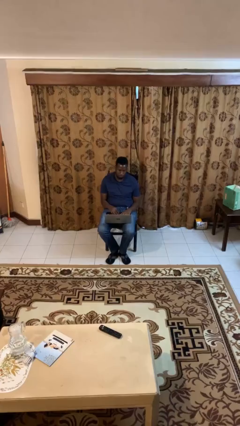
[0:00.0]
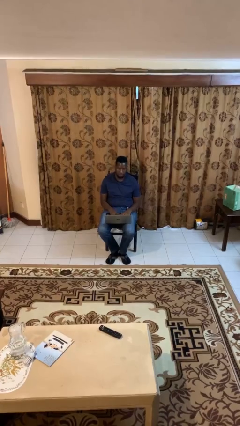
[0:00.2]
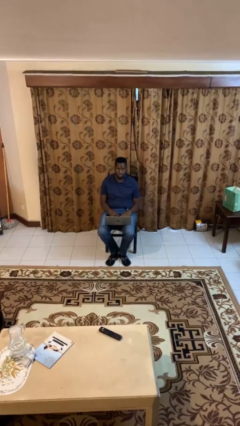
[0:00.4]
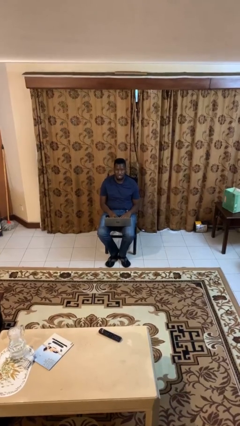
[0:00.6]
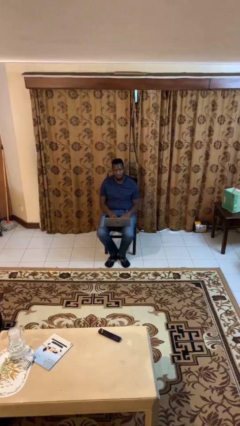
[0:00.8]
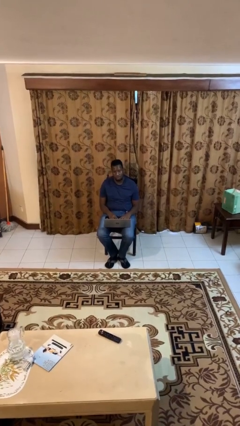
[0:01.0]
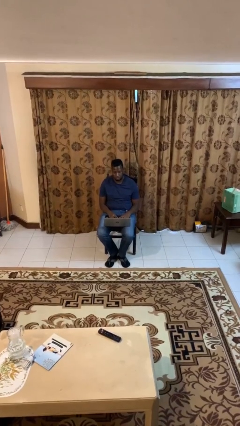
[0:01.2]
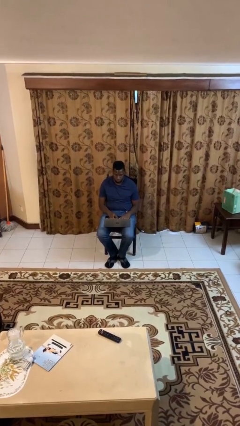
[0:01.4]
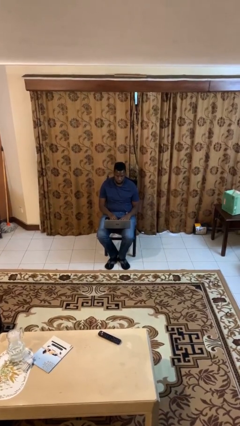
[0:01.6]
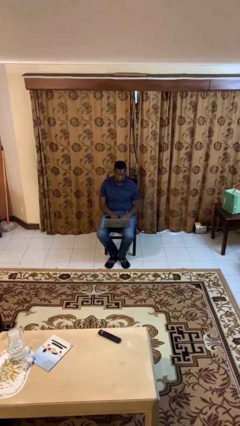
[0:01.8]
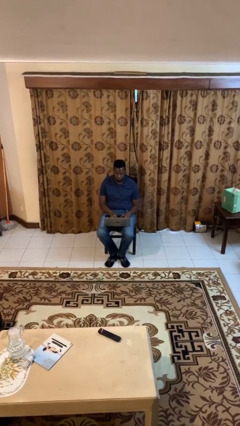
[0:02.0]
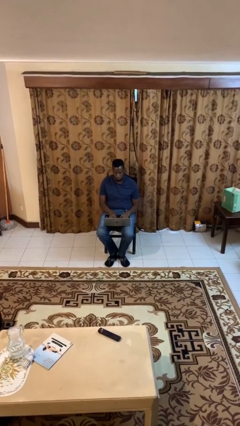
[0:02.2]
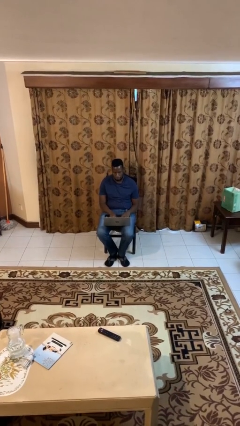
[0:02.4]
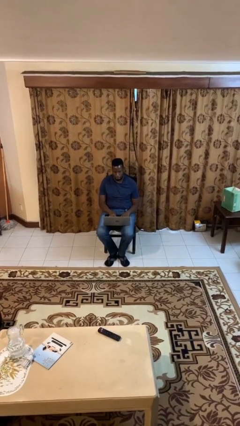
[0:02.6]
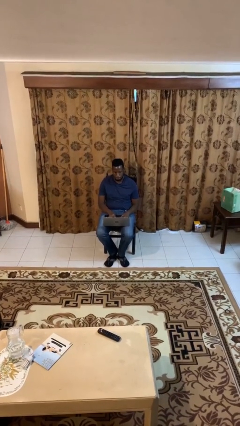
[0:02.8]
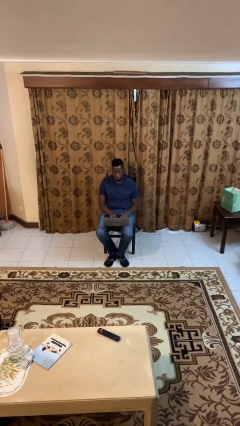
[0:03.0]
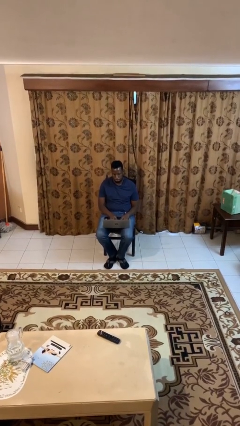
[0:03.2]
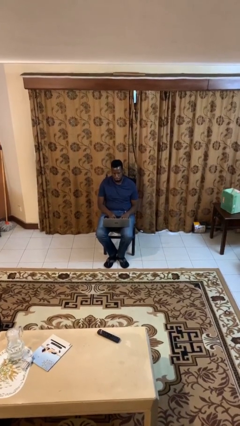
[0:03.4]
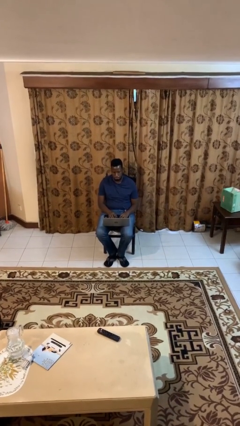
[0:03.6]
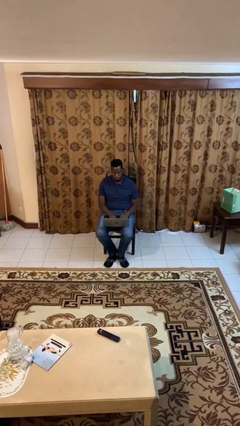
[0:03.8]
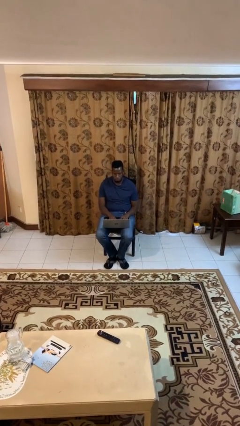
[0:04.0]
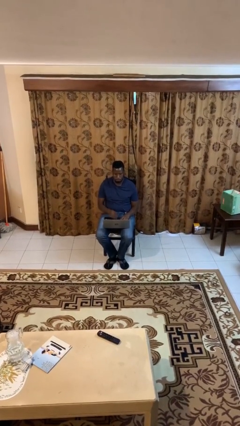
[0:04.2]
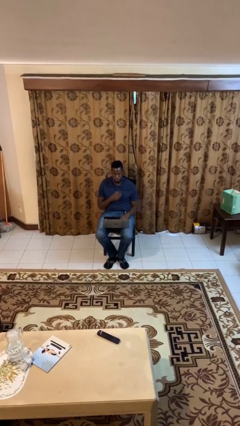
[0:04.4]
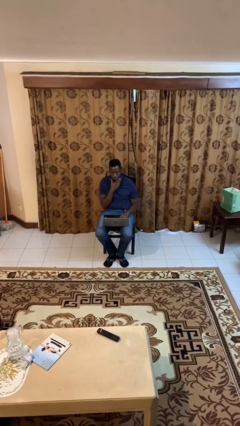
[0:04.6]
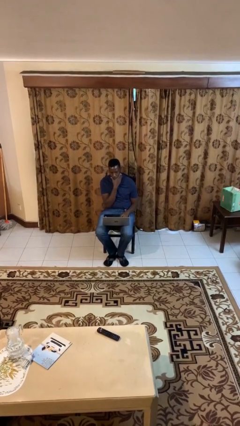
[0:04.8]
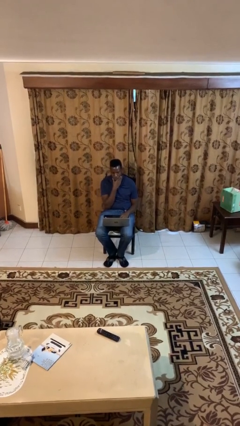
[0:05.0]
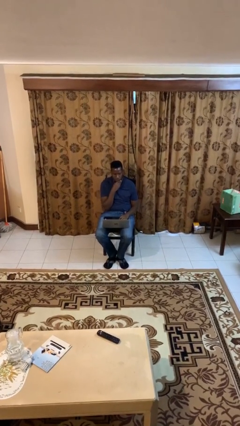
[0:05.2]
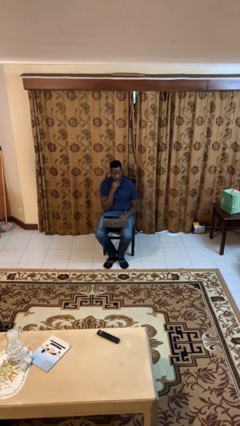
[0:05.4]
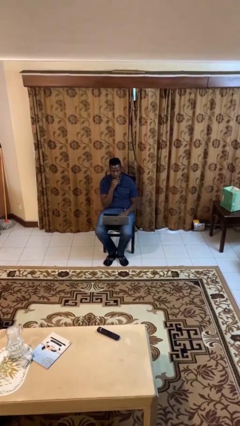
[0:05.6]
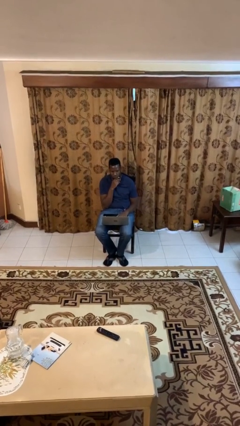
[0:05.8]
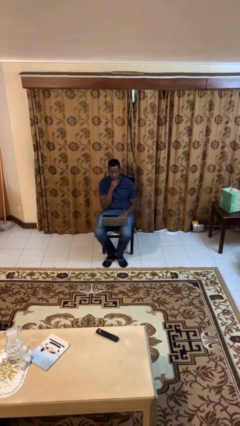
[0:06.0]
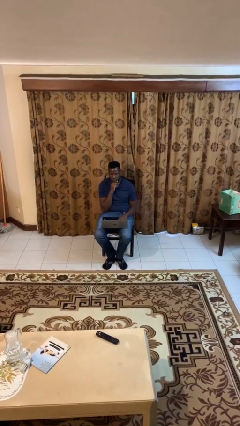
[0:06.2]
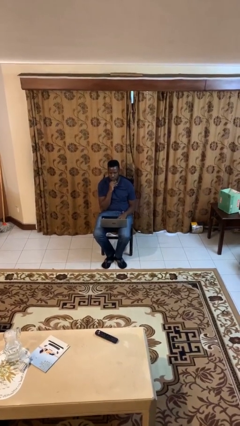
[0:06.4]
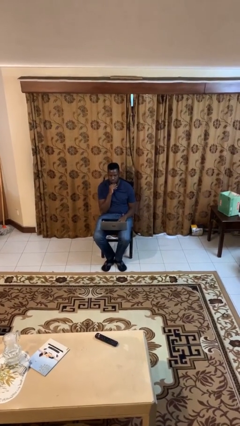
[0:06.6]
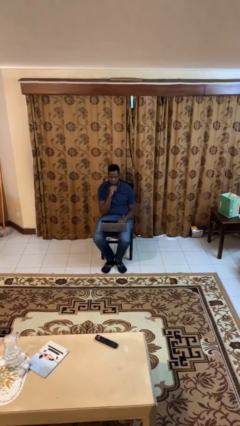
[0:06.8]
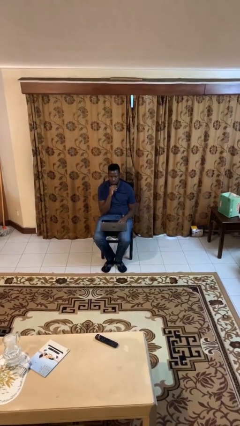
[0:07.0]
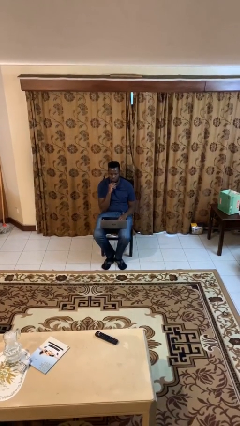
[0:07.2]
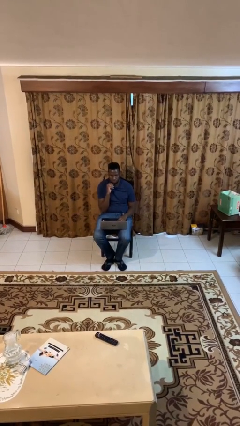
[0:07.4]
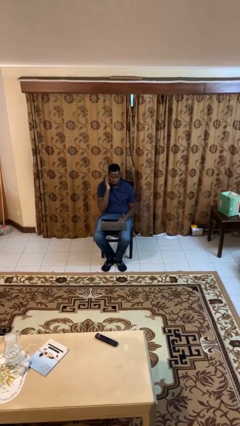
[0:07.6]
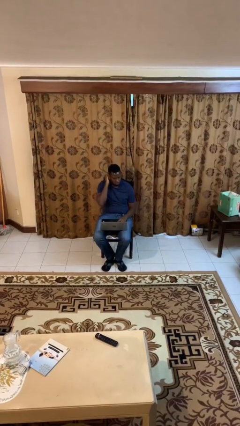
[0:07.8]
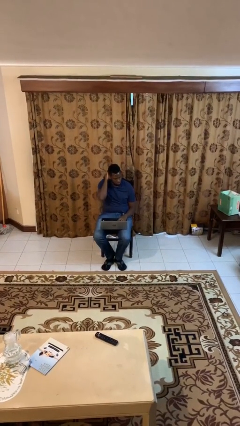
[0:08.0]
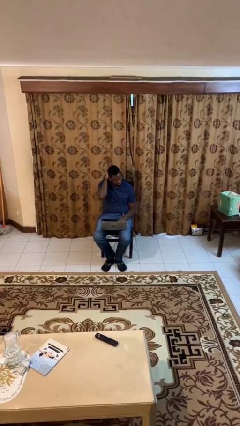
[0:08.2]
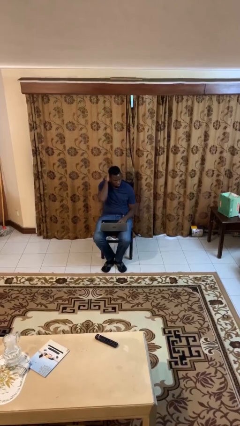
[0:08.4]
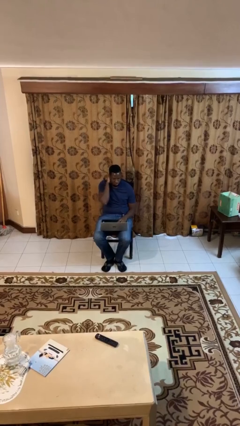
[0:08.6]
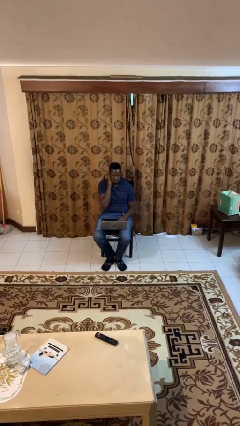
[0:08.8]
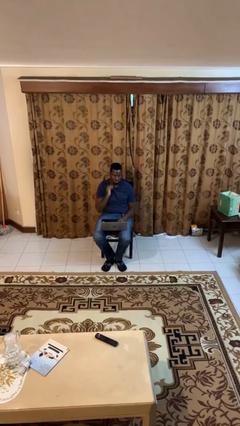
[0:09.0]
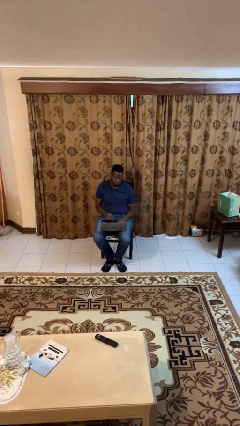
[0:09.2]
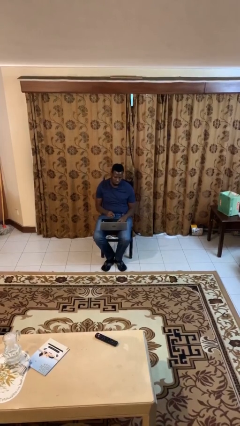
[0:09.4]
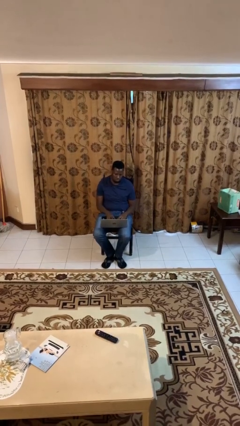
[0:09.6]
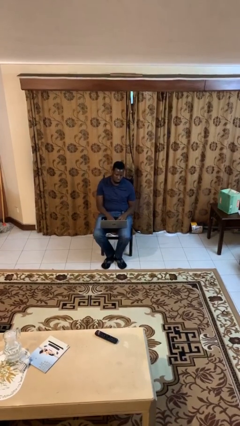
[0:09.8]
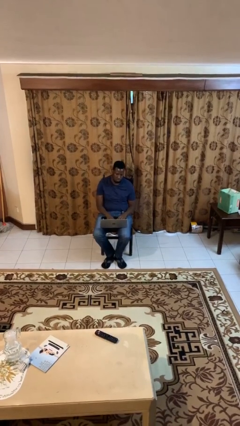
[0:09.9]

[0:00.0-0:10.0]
person interacts with laptop

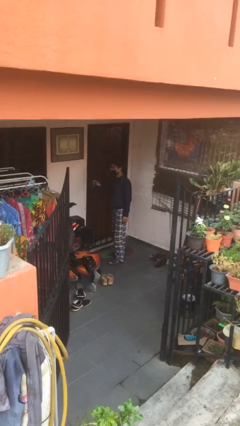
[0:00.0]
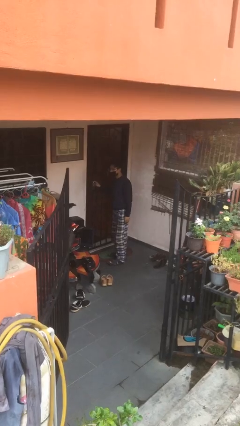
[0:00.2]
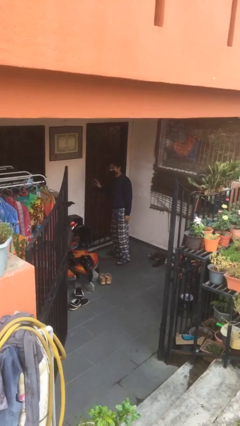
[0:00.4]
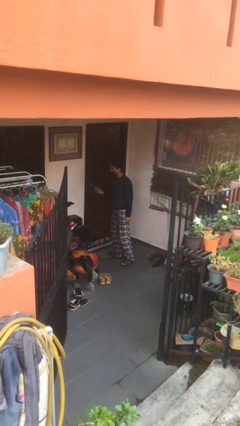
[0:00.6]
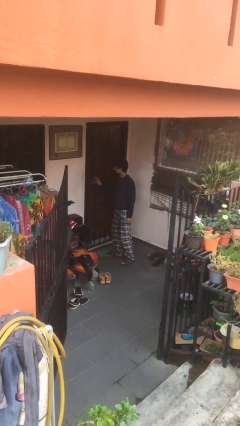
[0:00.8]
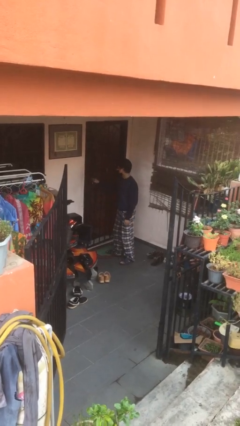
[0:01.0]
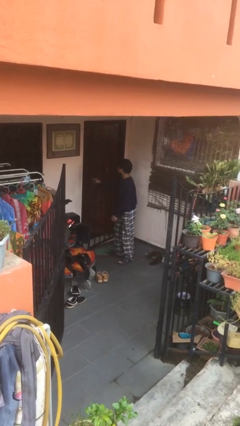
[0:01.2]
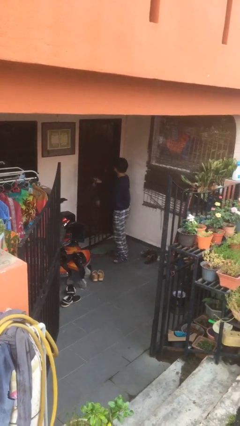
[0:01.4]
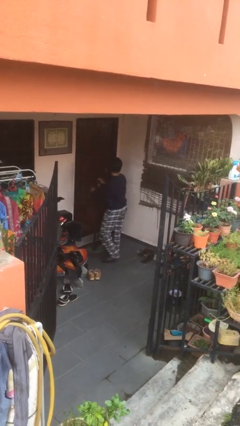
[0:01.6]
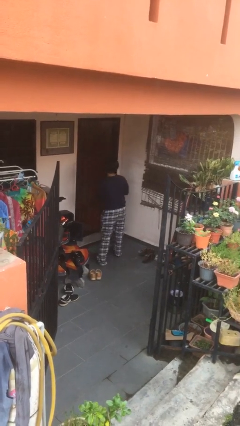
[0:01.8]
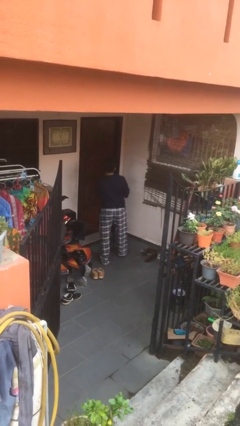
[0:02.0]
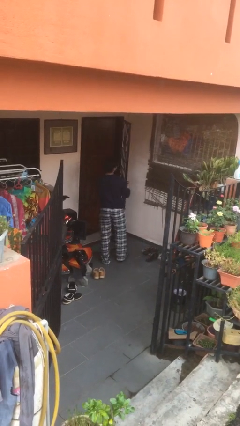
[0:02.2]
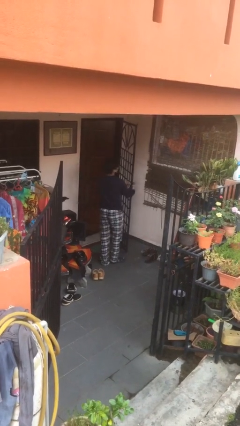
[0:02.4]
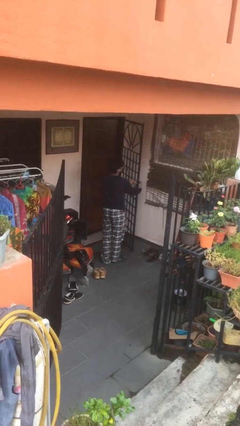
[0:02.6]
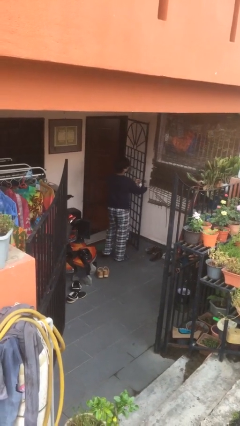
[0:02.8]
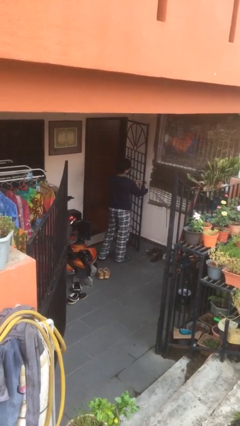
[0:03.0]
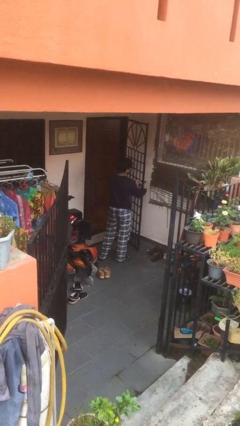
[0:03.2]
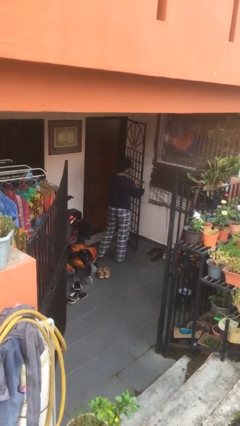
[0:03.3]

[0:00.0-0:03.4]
person opens facility door

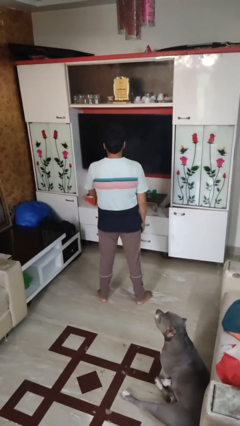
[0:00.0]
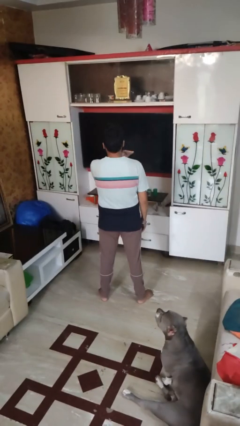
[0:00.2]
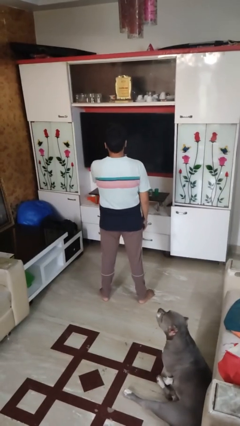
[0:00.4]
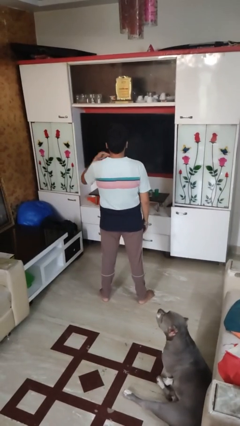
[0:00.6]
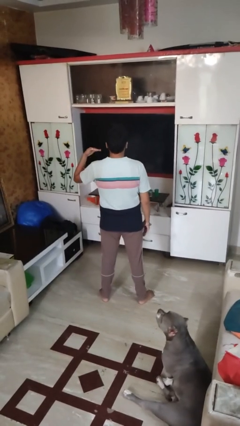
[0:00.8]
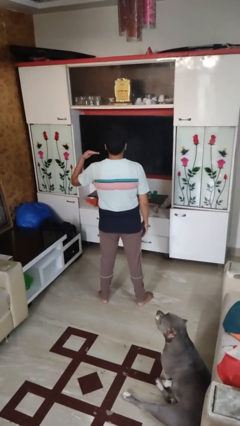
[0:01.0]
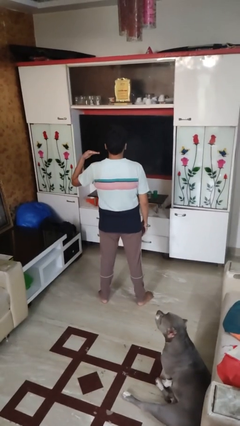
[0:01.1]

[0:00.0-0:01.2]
person gestures cut

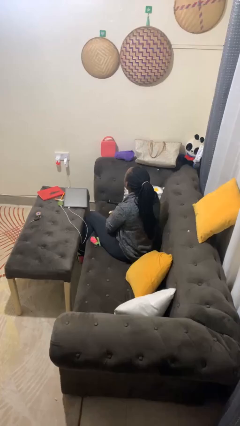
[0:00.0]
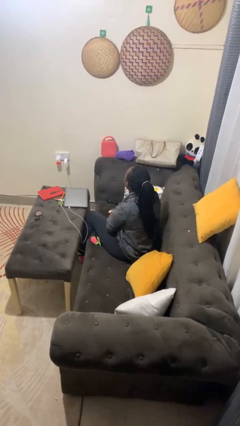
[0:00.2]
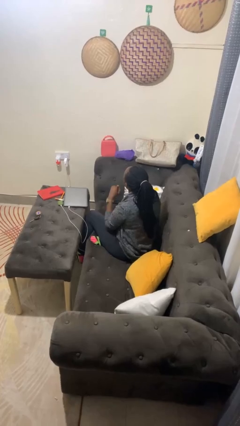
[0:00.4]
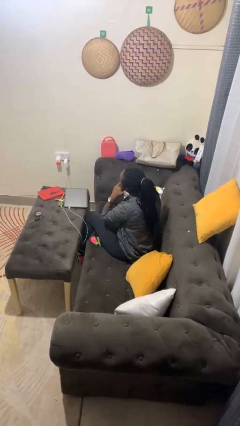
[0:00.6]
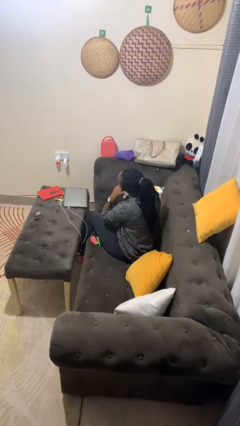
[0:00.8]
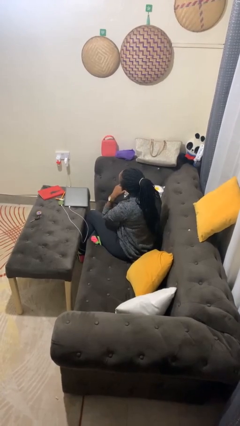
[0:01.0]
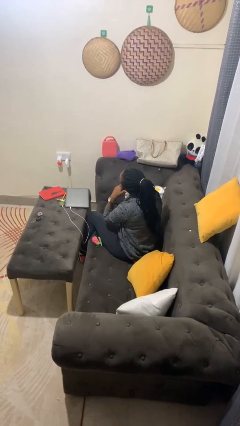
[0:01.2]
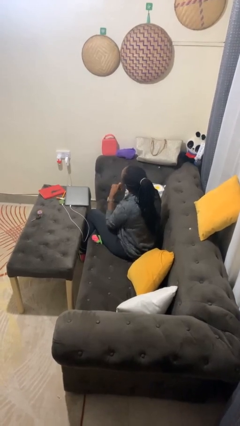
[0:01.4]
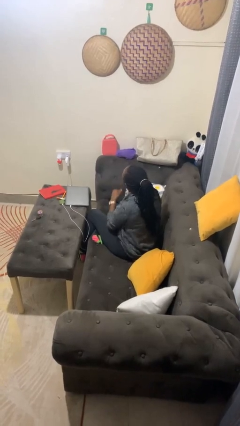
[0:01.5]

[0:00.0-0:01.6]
person gestures call me

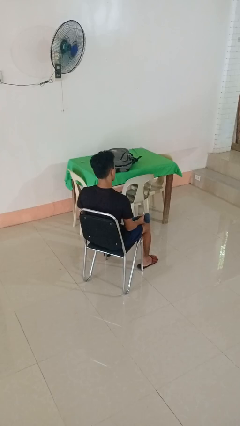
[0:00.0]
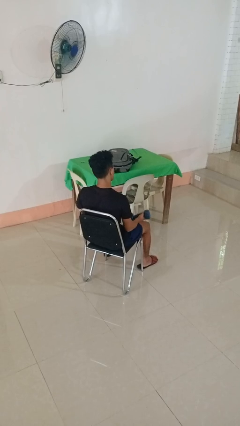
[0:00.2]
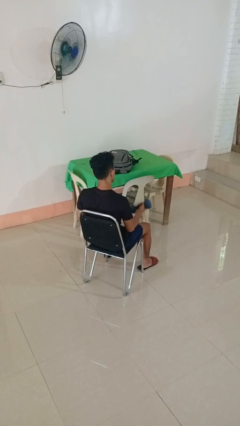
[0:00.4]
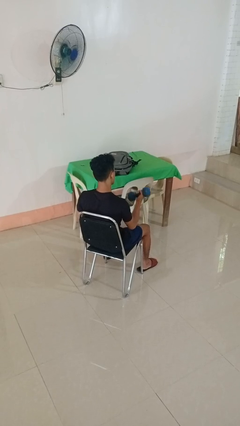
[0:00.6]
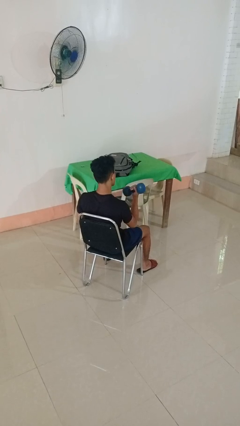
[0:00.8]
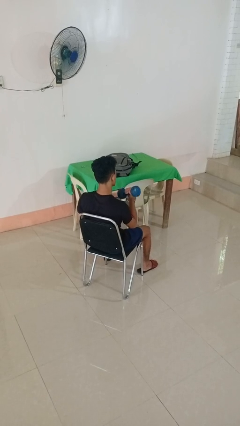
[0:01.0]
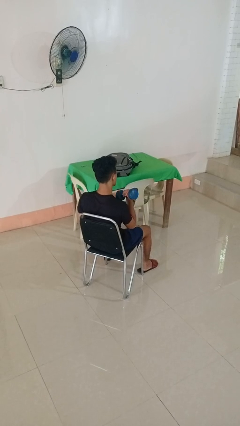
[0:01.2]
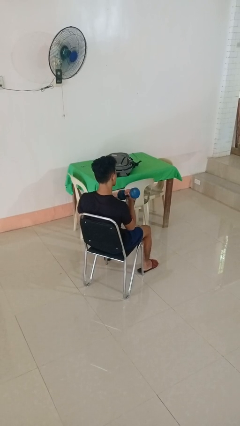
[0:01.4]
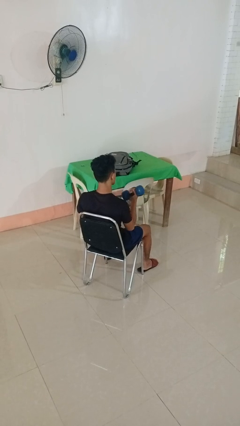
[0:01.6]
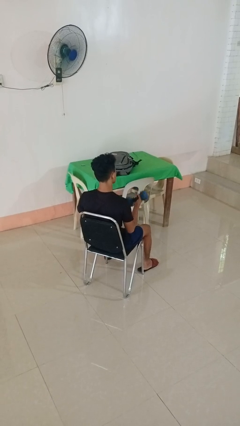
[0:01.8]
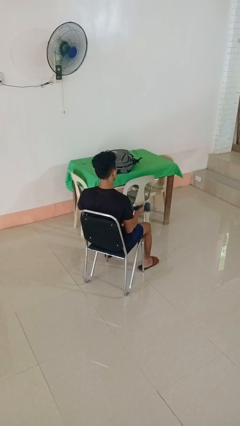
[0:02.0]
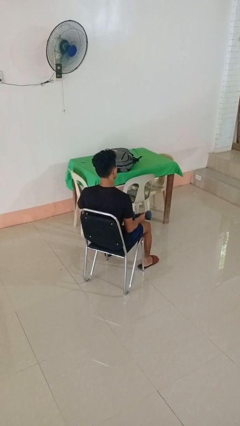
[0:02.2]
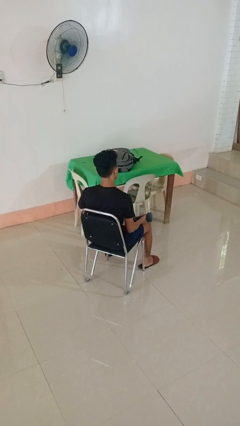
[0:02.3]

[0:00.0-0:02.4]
person lifts dumbbells
